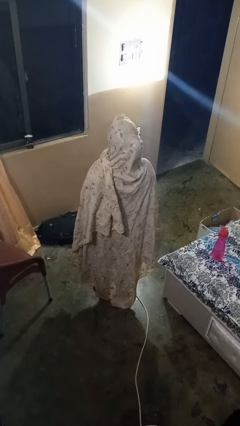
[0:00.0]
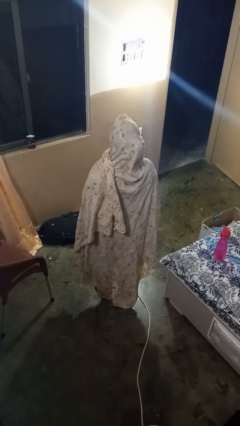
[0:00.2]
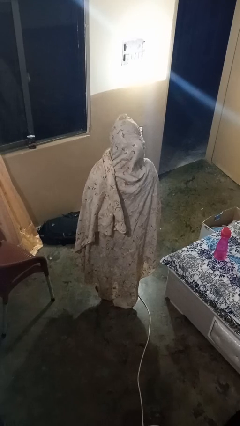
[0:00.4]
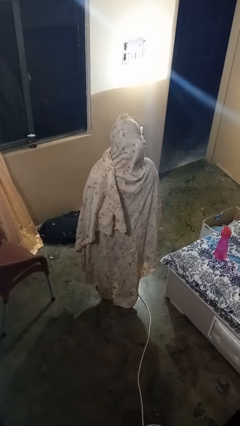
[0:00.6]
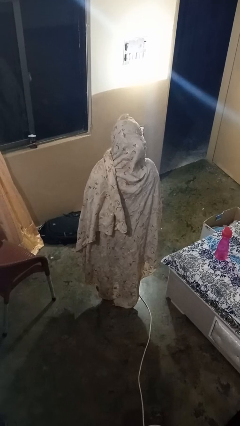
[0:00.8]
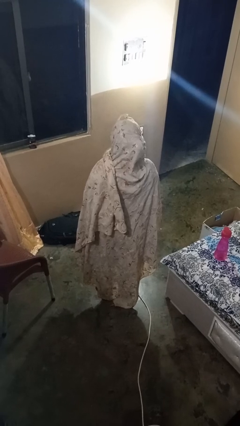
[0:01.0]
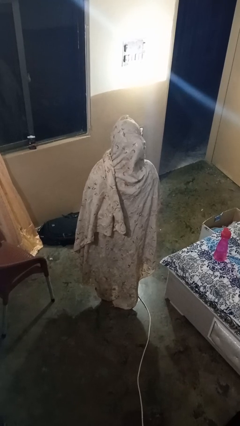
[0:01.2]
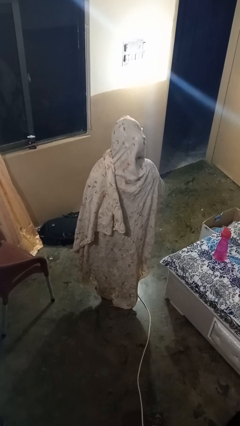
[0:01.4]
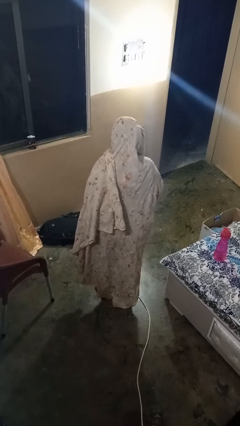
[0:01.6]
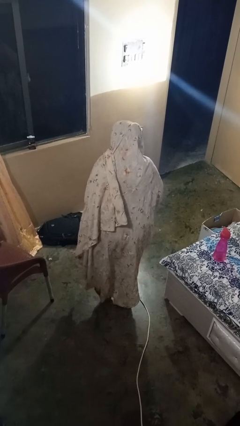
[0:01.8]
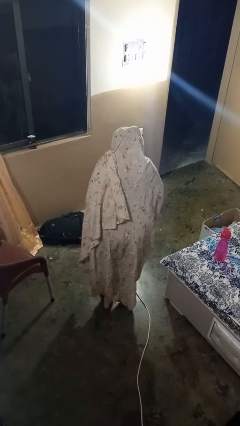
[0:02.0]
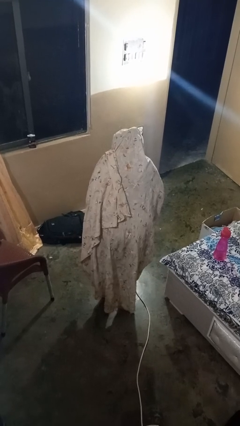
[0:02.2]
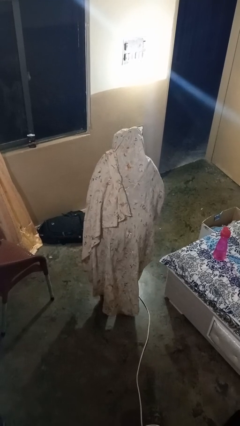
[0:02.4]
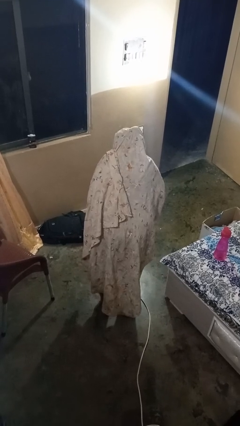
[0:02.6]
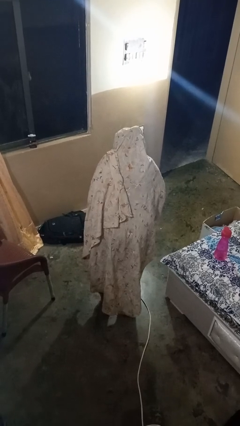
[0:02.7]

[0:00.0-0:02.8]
person bows

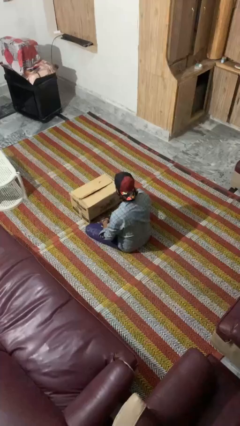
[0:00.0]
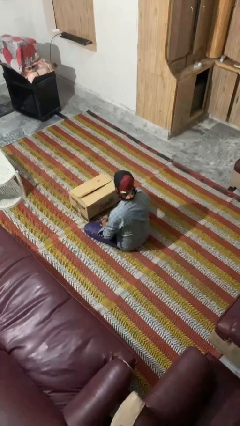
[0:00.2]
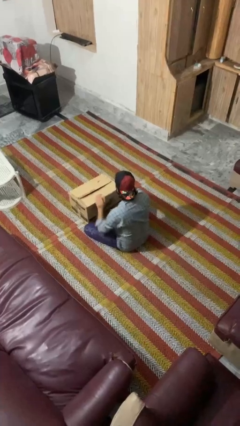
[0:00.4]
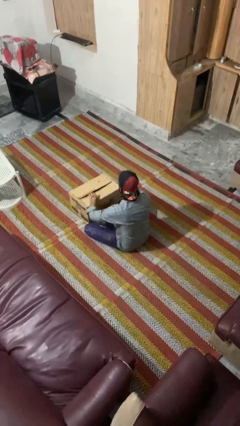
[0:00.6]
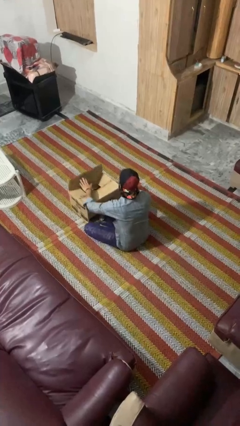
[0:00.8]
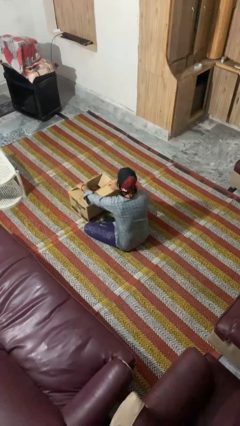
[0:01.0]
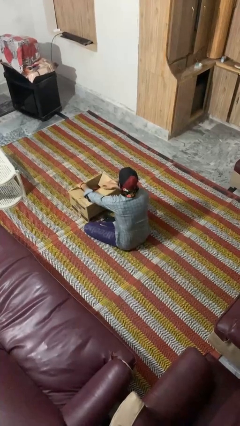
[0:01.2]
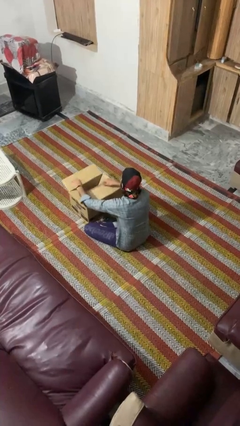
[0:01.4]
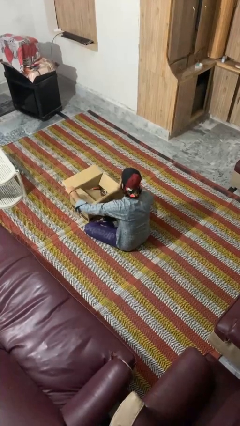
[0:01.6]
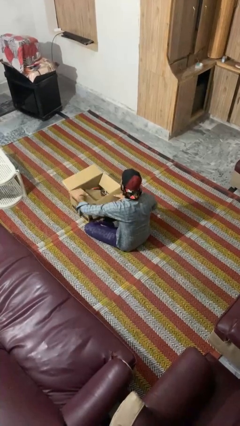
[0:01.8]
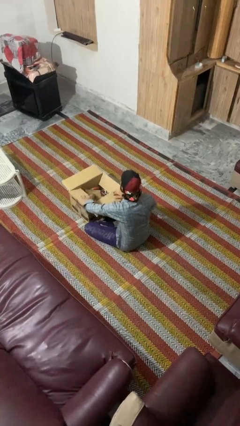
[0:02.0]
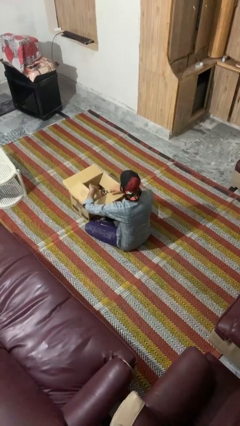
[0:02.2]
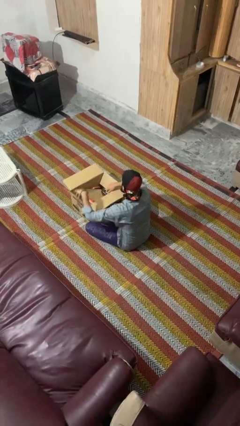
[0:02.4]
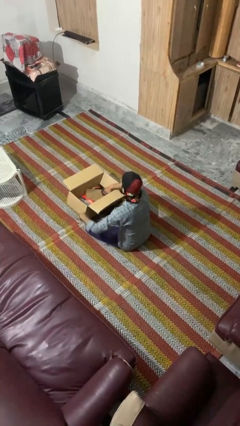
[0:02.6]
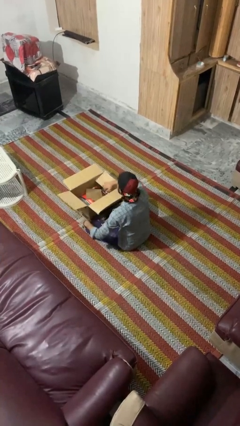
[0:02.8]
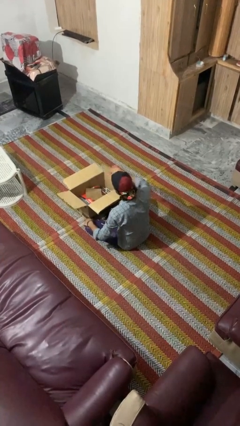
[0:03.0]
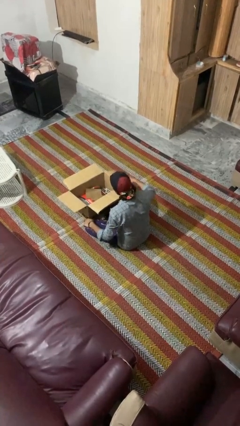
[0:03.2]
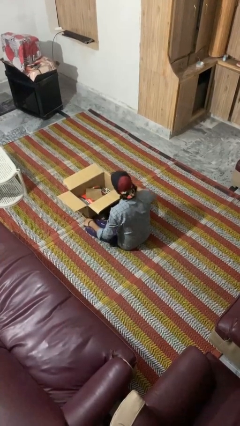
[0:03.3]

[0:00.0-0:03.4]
person opens box

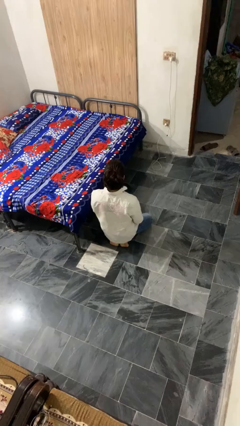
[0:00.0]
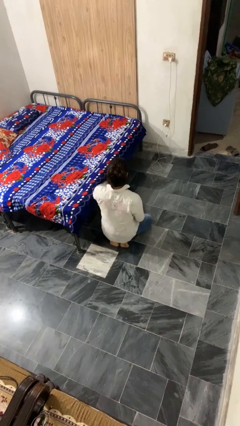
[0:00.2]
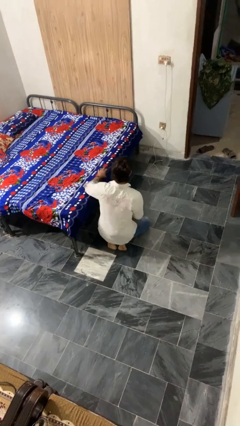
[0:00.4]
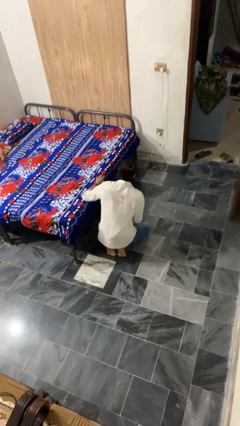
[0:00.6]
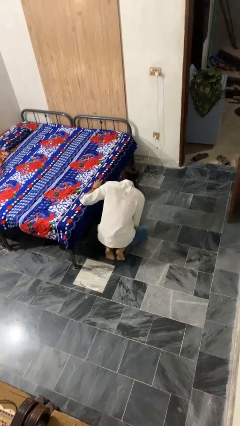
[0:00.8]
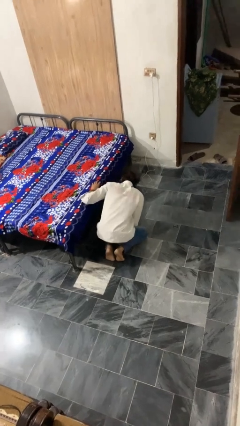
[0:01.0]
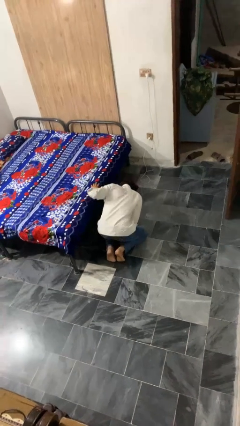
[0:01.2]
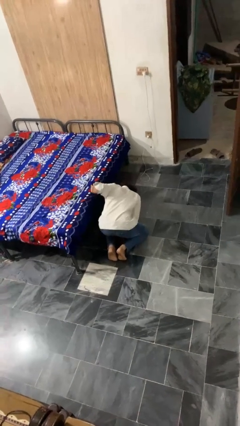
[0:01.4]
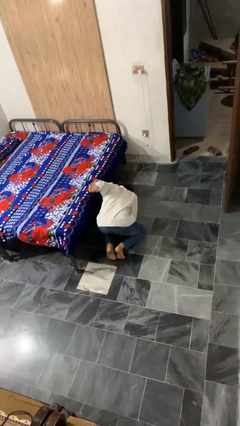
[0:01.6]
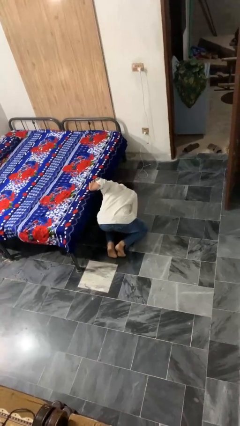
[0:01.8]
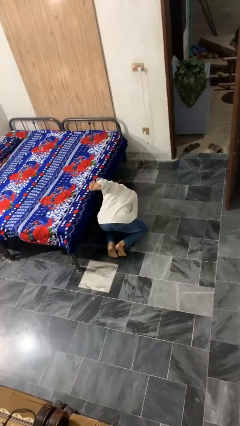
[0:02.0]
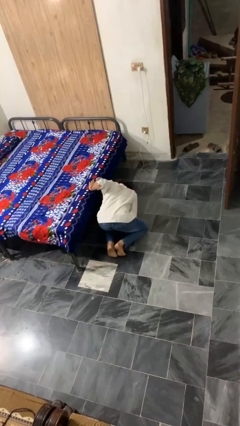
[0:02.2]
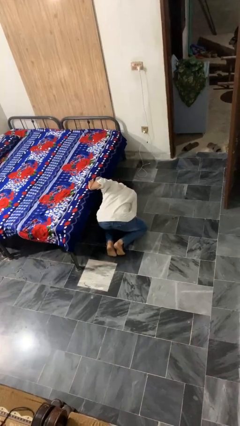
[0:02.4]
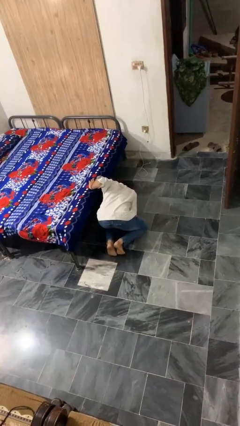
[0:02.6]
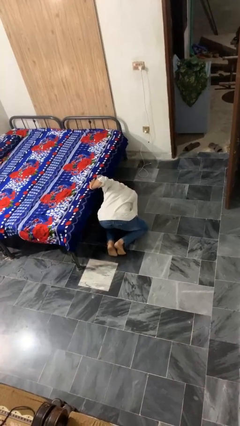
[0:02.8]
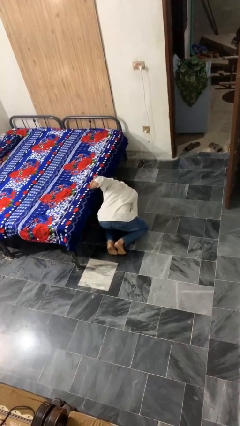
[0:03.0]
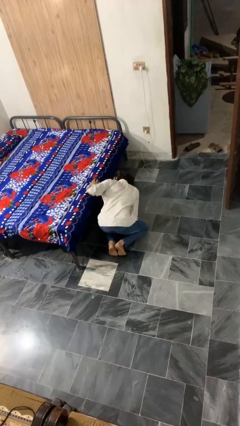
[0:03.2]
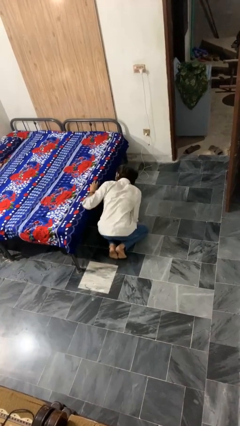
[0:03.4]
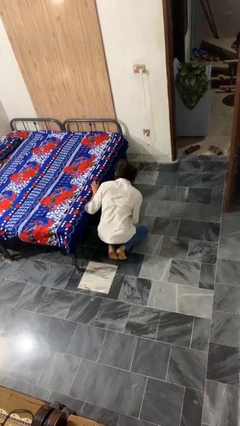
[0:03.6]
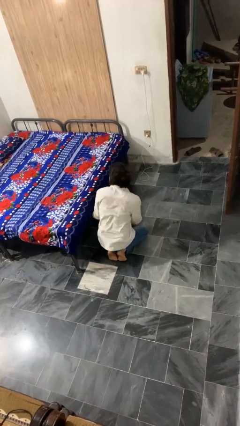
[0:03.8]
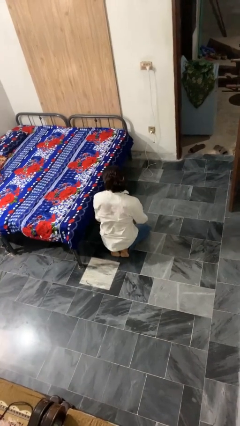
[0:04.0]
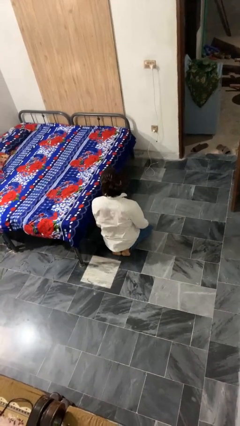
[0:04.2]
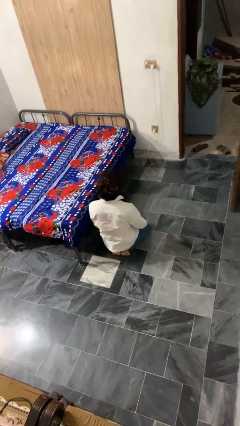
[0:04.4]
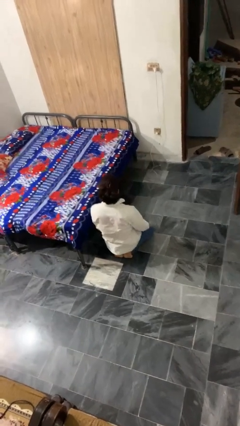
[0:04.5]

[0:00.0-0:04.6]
person searches under bed

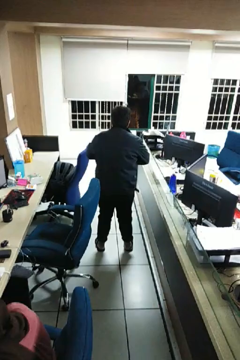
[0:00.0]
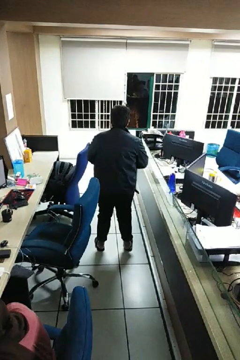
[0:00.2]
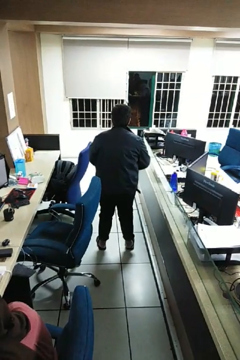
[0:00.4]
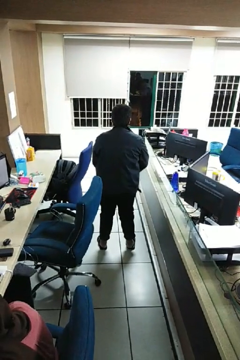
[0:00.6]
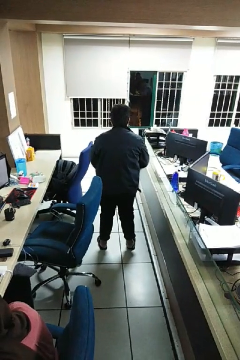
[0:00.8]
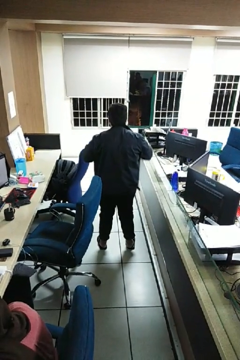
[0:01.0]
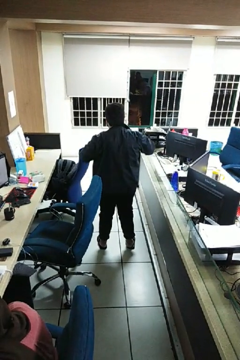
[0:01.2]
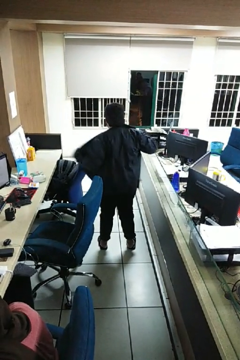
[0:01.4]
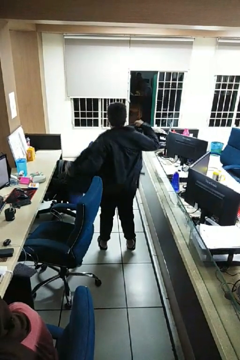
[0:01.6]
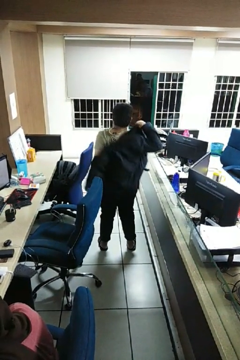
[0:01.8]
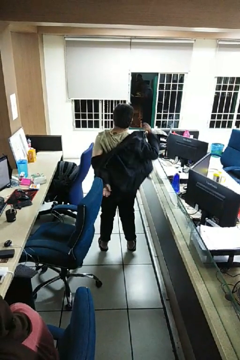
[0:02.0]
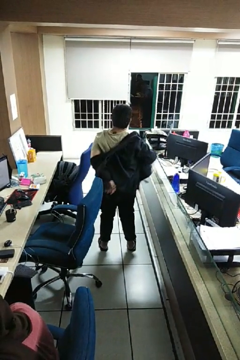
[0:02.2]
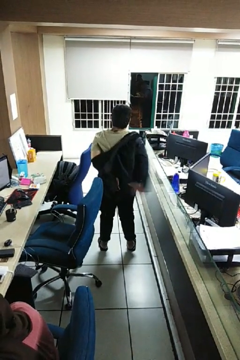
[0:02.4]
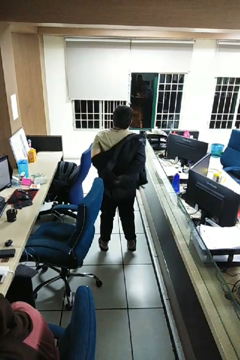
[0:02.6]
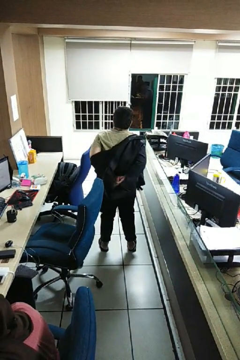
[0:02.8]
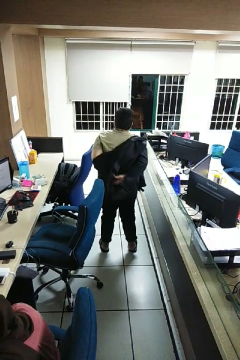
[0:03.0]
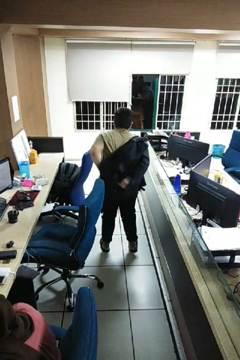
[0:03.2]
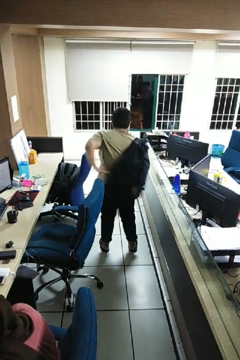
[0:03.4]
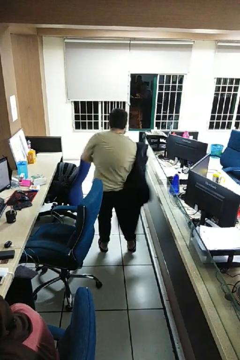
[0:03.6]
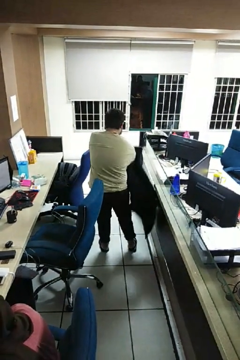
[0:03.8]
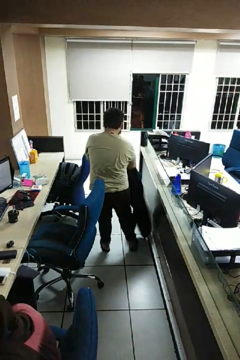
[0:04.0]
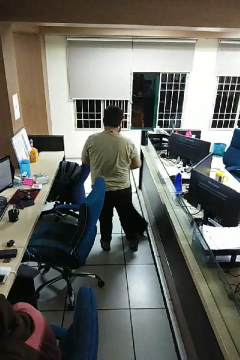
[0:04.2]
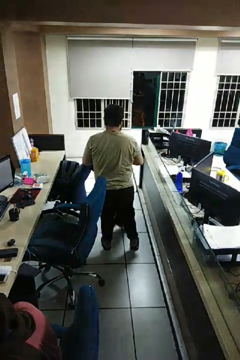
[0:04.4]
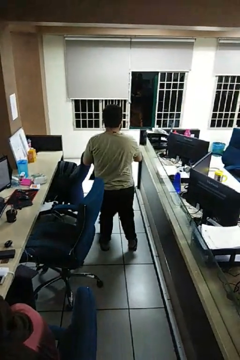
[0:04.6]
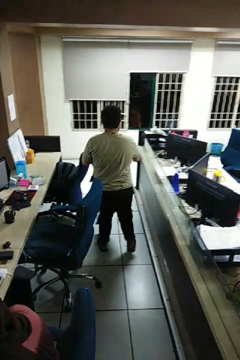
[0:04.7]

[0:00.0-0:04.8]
person takes off shirt

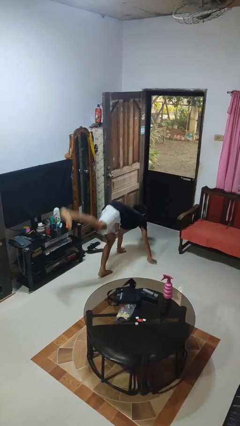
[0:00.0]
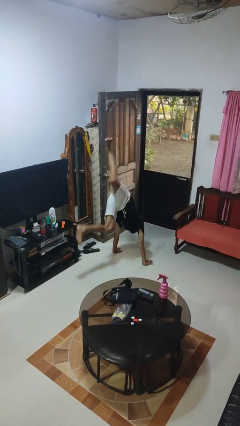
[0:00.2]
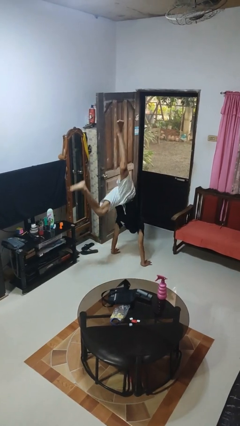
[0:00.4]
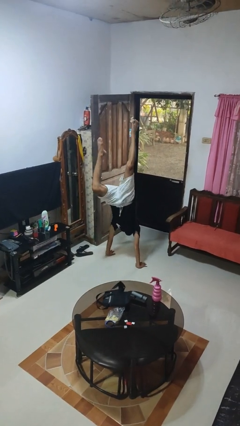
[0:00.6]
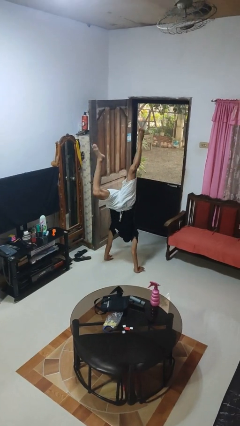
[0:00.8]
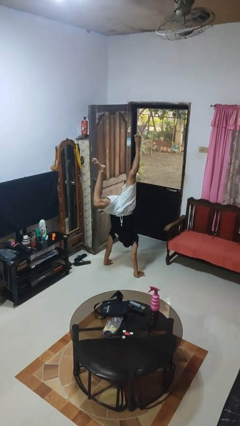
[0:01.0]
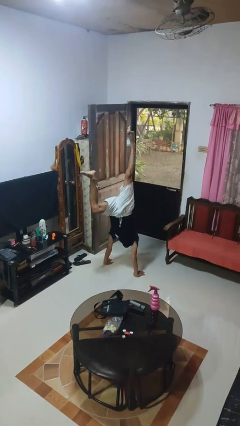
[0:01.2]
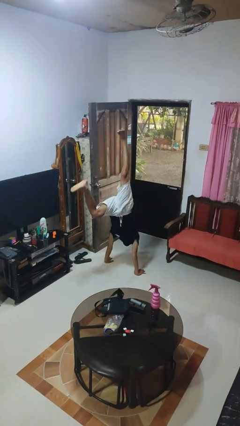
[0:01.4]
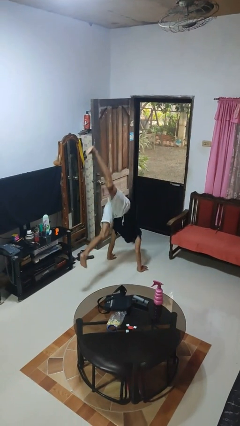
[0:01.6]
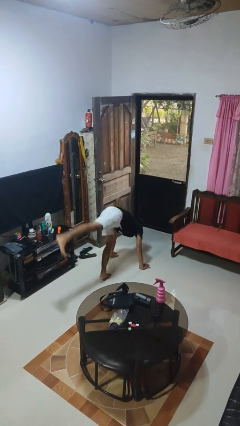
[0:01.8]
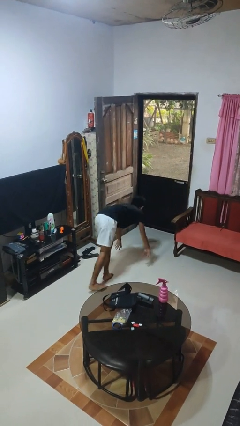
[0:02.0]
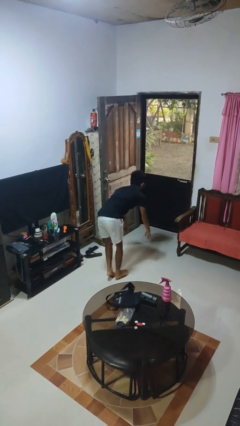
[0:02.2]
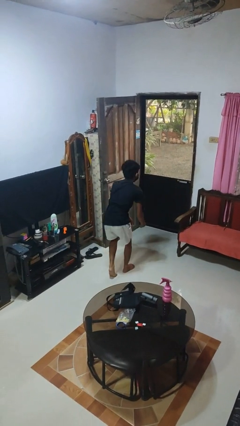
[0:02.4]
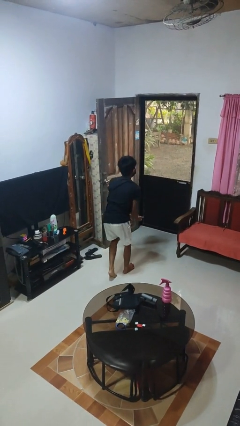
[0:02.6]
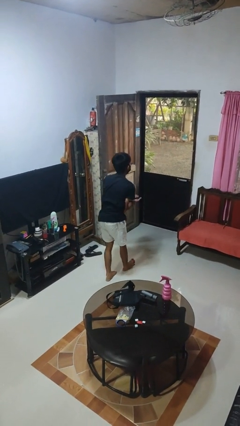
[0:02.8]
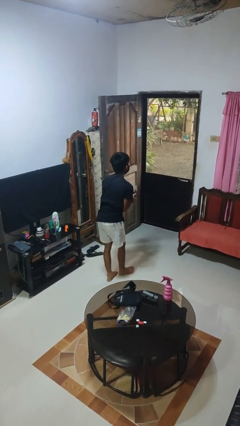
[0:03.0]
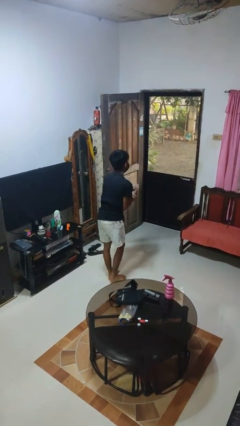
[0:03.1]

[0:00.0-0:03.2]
person handstand
